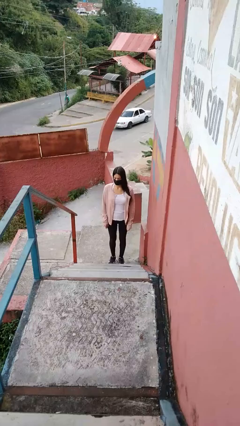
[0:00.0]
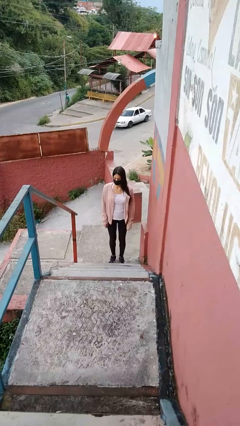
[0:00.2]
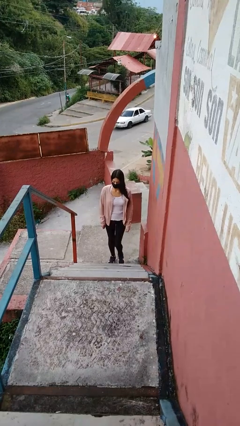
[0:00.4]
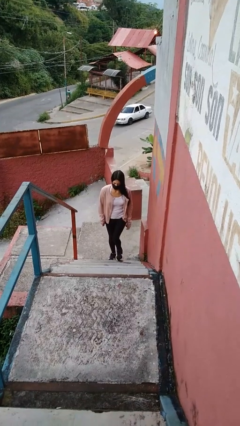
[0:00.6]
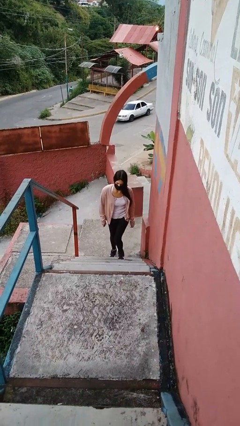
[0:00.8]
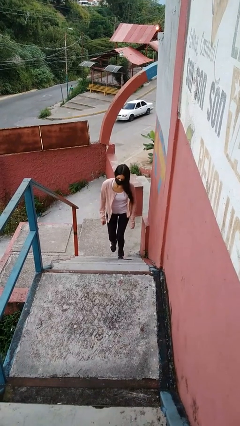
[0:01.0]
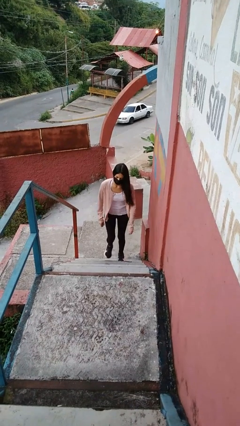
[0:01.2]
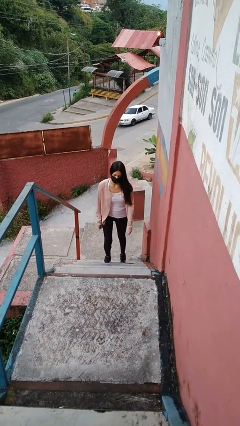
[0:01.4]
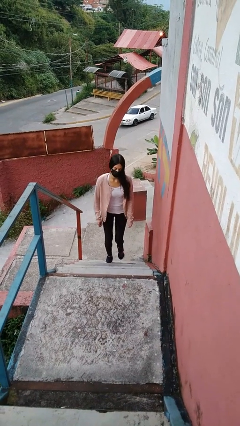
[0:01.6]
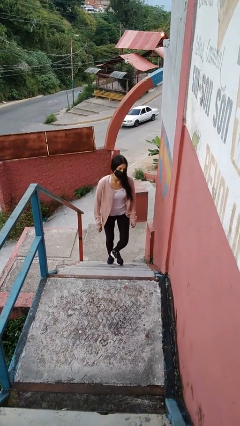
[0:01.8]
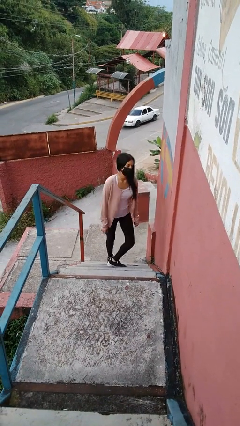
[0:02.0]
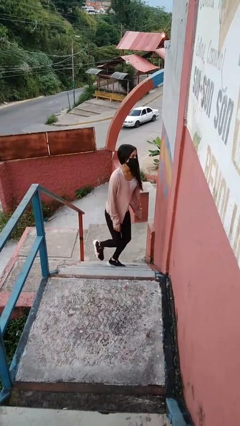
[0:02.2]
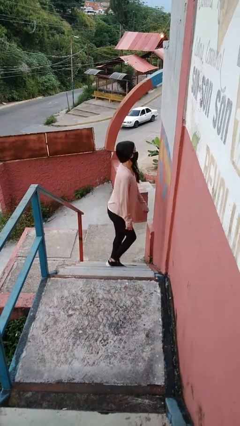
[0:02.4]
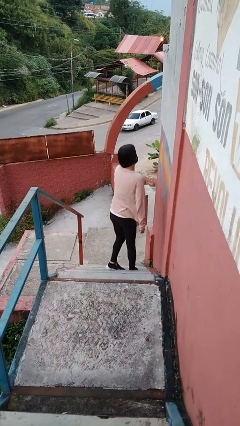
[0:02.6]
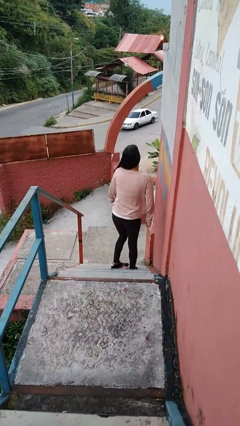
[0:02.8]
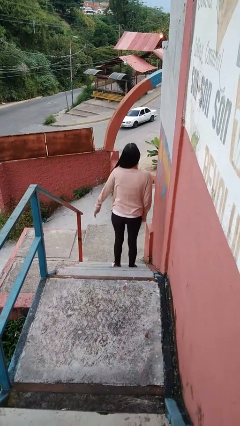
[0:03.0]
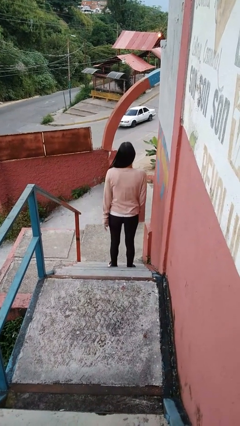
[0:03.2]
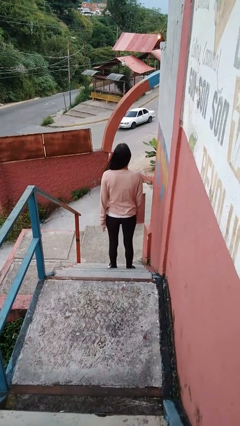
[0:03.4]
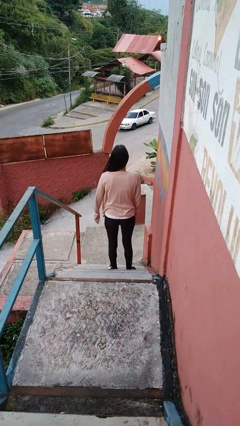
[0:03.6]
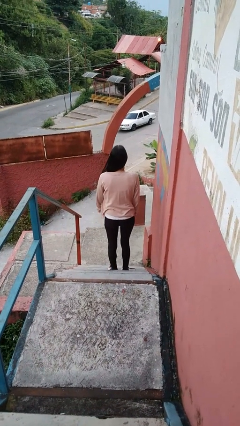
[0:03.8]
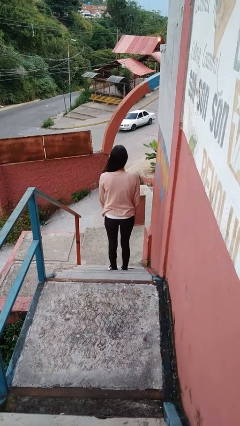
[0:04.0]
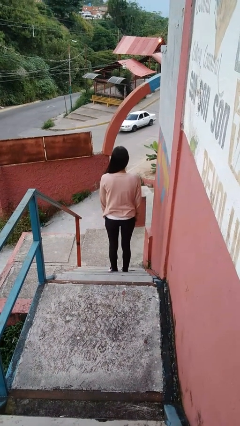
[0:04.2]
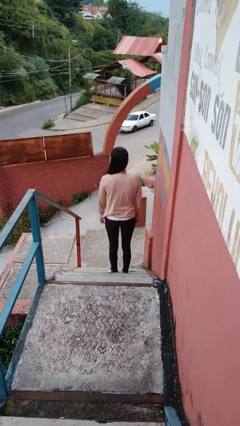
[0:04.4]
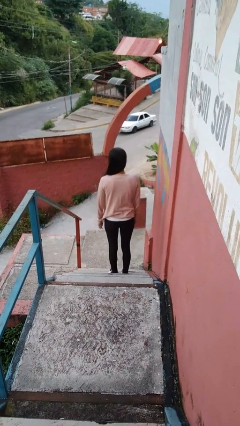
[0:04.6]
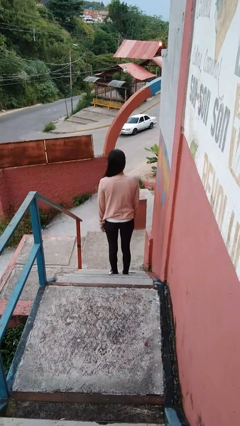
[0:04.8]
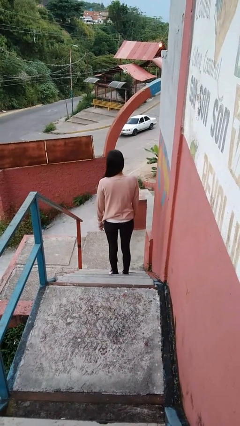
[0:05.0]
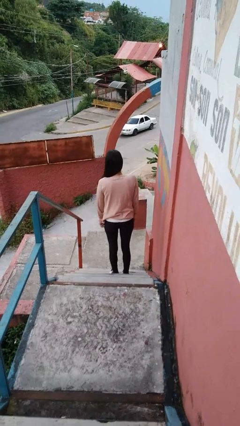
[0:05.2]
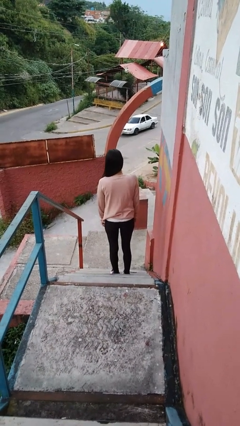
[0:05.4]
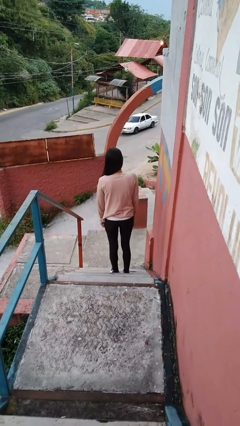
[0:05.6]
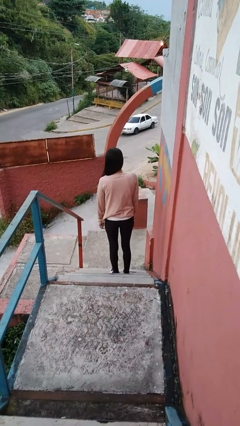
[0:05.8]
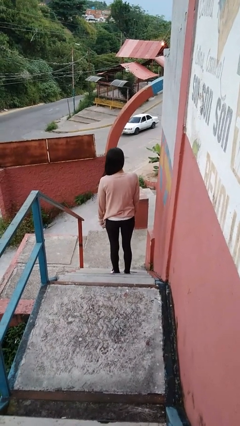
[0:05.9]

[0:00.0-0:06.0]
person climbs up stairs

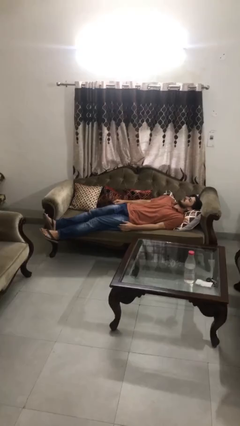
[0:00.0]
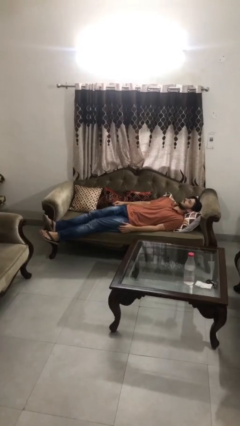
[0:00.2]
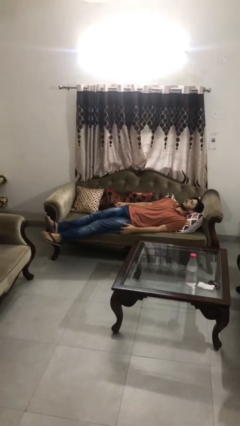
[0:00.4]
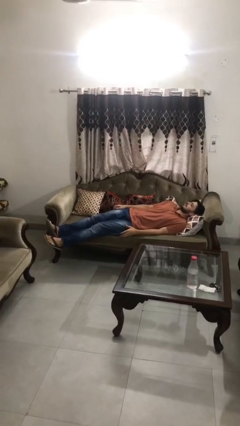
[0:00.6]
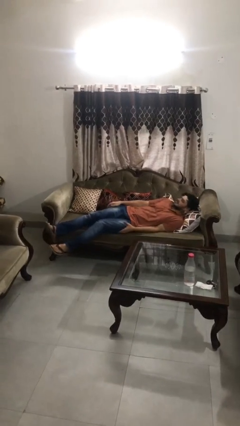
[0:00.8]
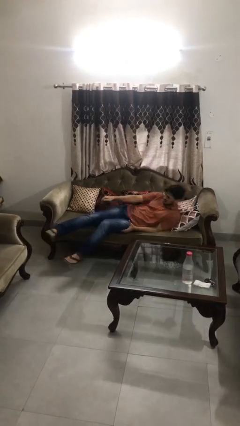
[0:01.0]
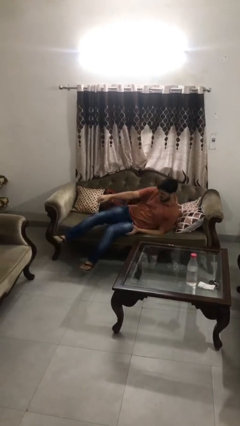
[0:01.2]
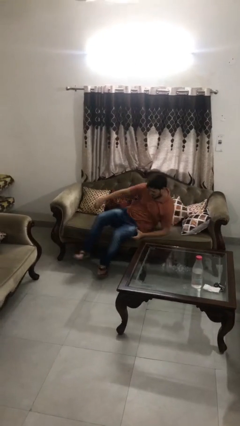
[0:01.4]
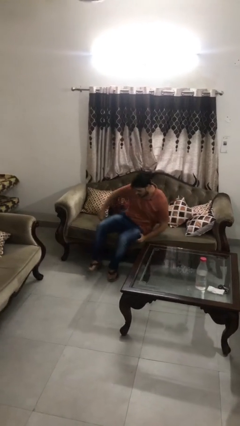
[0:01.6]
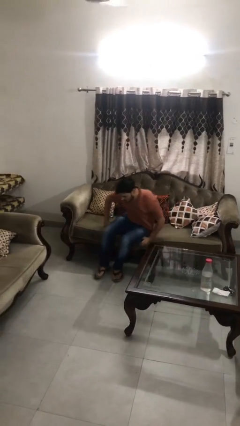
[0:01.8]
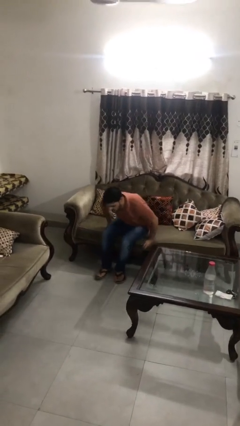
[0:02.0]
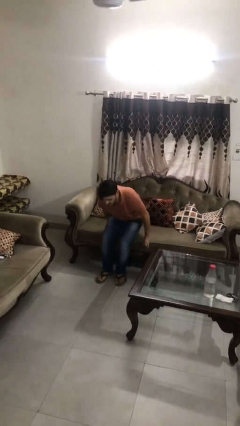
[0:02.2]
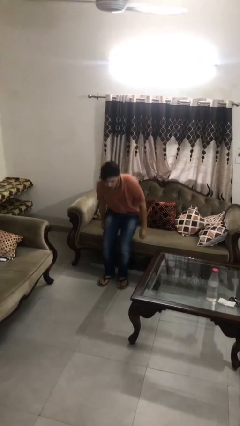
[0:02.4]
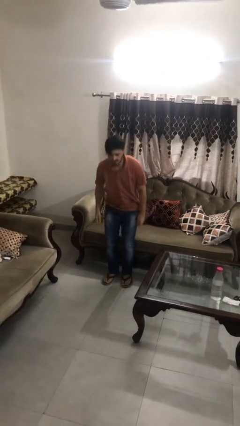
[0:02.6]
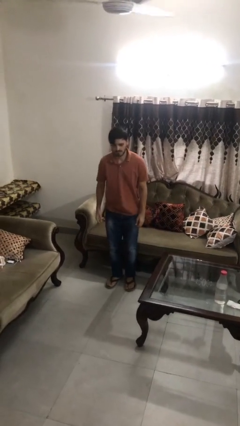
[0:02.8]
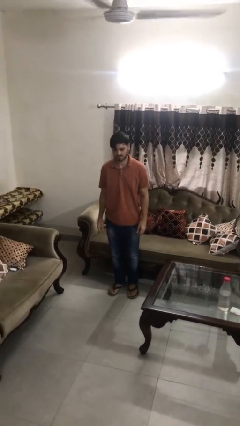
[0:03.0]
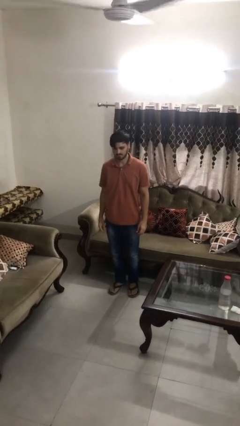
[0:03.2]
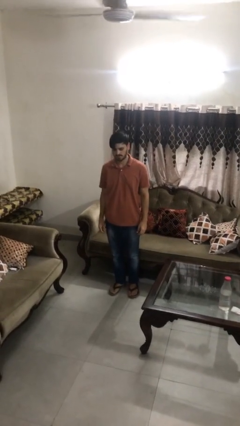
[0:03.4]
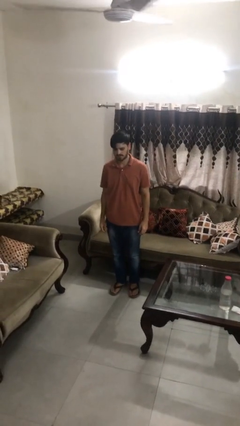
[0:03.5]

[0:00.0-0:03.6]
person stands up

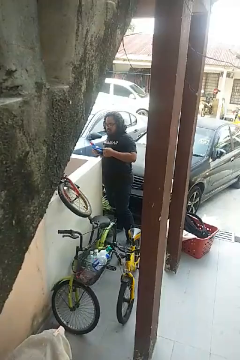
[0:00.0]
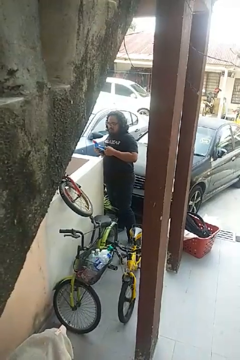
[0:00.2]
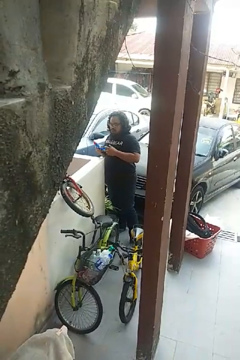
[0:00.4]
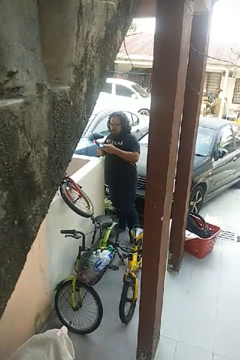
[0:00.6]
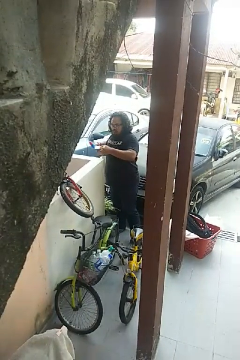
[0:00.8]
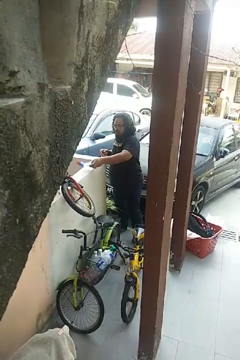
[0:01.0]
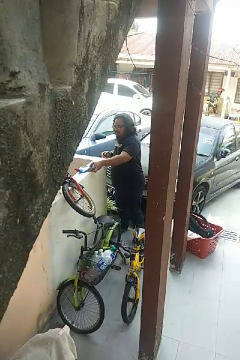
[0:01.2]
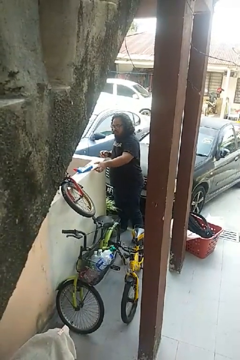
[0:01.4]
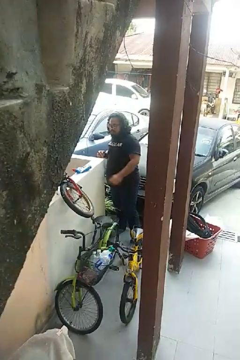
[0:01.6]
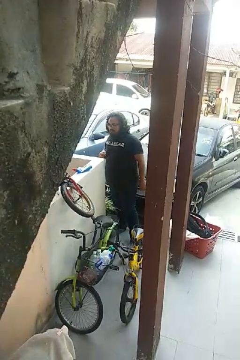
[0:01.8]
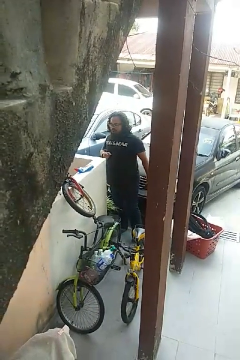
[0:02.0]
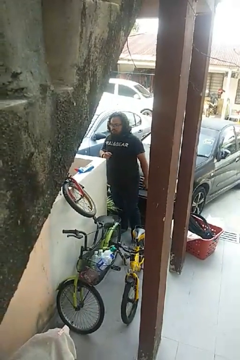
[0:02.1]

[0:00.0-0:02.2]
person puts down object on countertop

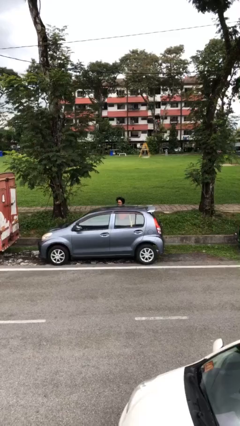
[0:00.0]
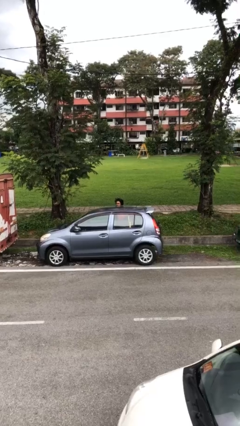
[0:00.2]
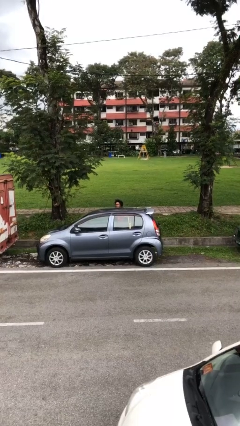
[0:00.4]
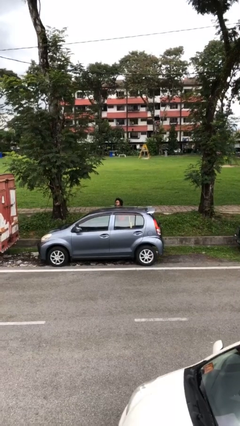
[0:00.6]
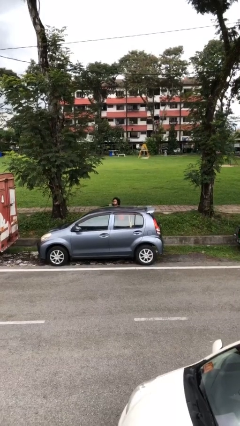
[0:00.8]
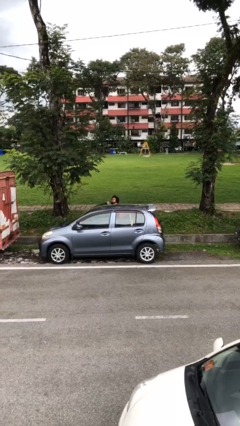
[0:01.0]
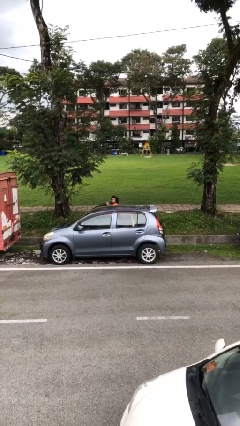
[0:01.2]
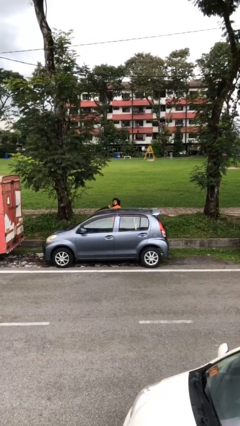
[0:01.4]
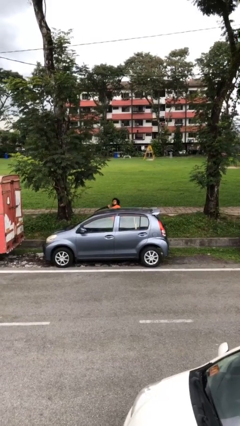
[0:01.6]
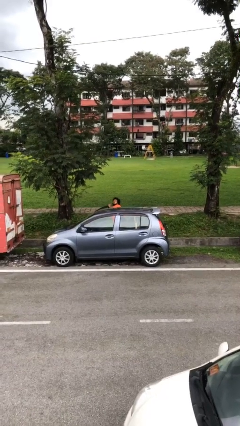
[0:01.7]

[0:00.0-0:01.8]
person opens car door

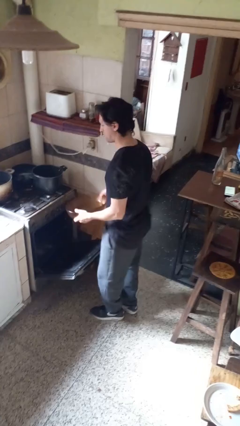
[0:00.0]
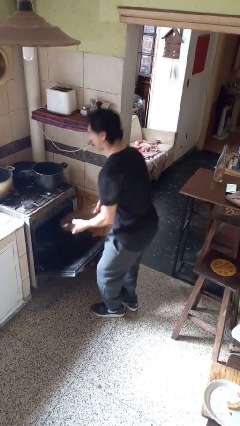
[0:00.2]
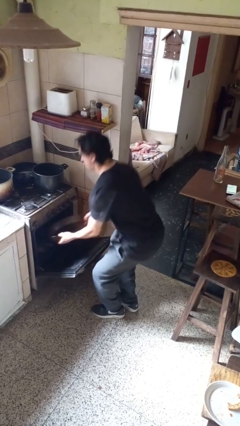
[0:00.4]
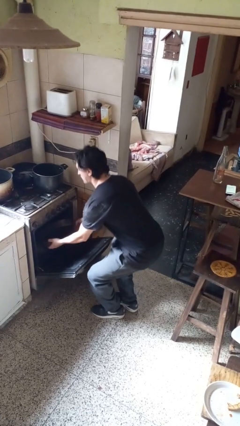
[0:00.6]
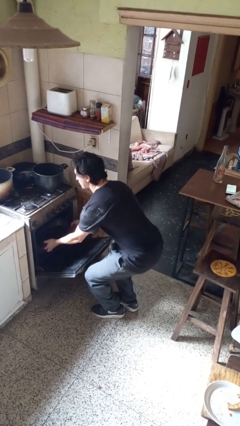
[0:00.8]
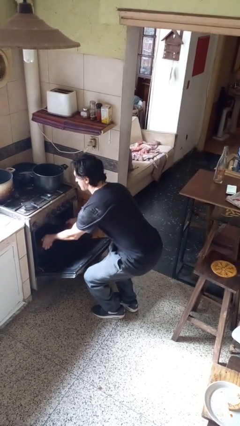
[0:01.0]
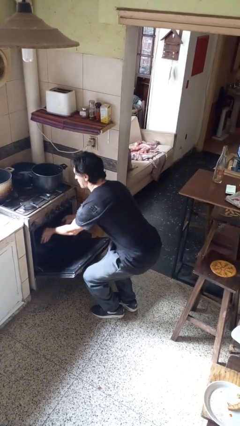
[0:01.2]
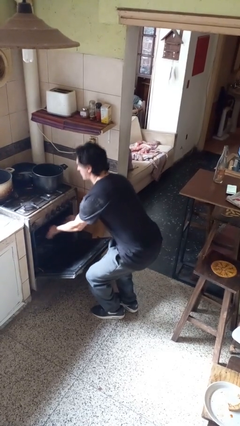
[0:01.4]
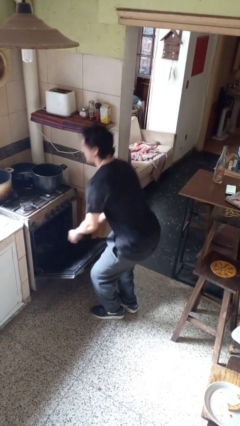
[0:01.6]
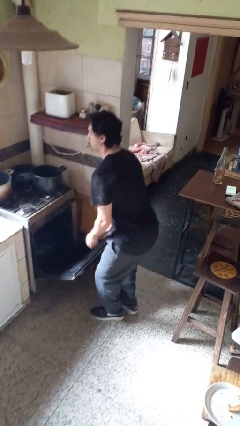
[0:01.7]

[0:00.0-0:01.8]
person puts object into oven

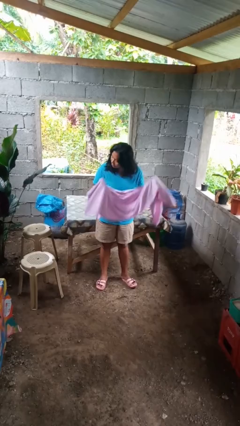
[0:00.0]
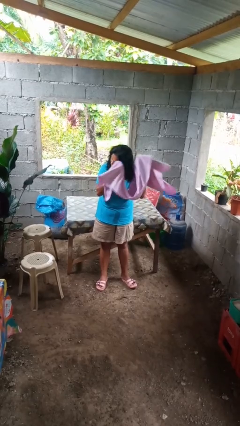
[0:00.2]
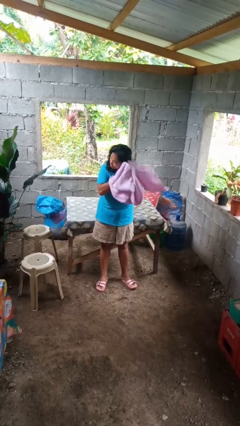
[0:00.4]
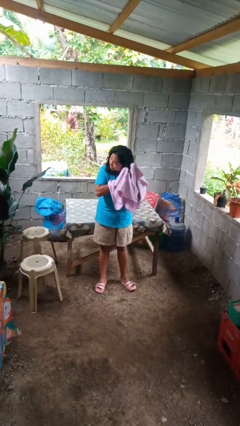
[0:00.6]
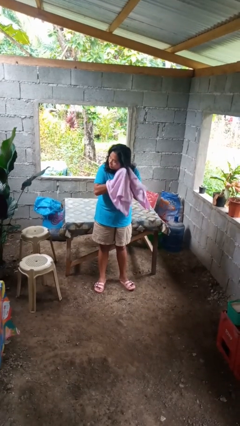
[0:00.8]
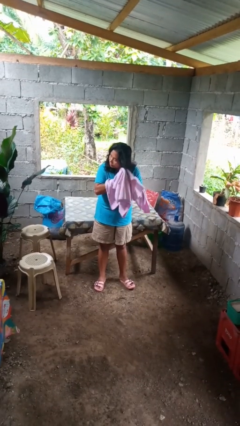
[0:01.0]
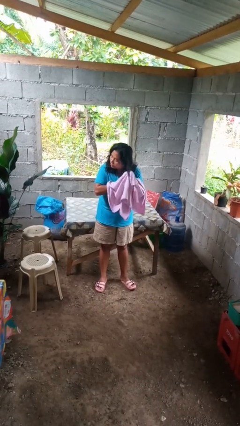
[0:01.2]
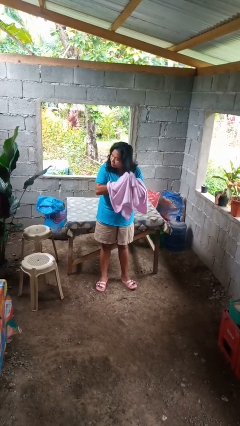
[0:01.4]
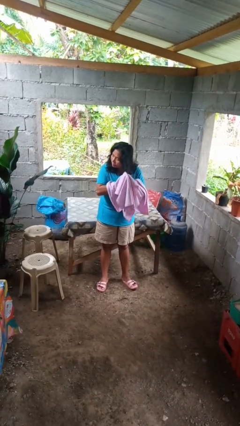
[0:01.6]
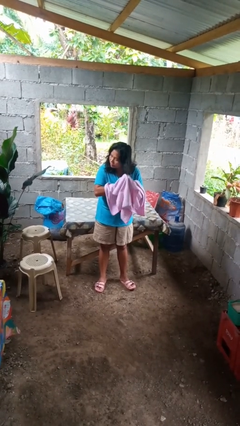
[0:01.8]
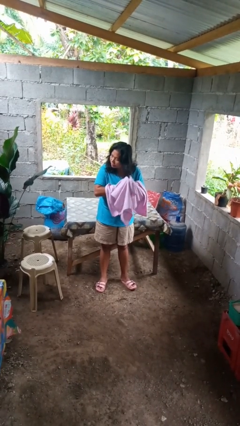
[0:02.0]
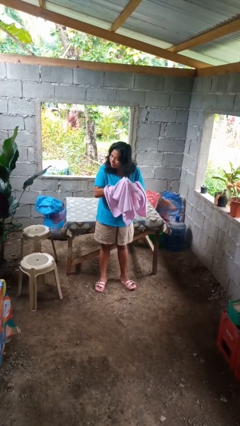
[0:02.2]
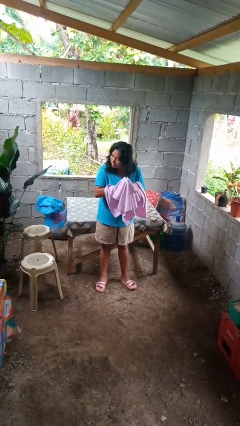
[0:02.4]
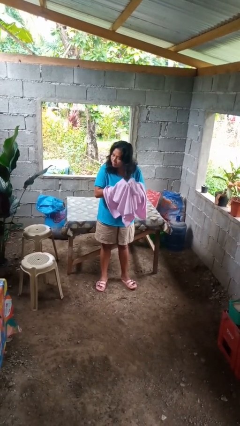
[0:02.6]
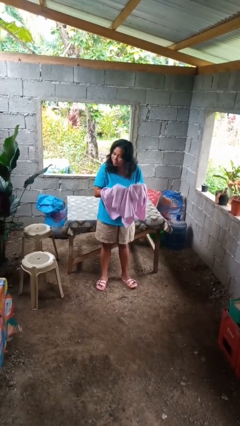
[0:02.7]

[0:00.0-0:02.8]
person dries hair with towel
